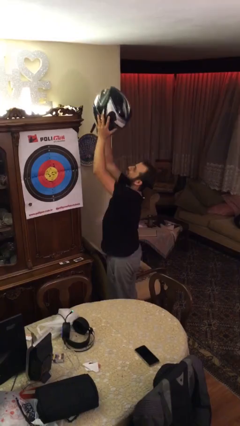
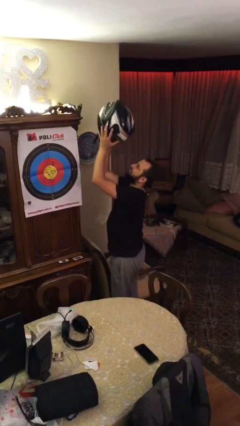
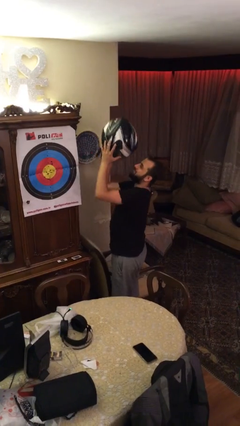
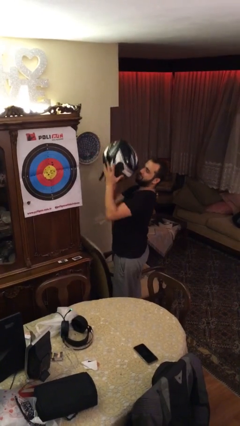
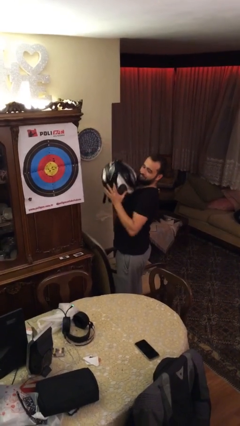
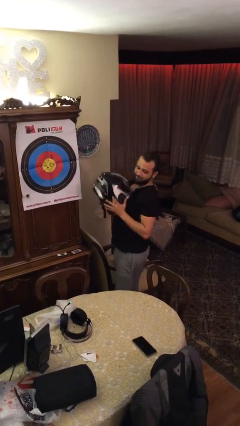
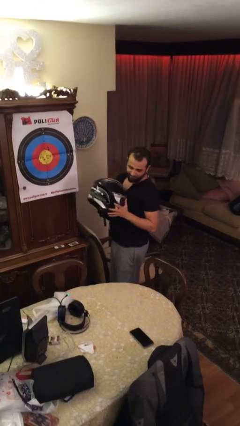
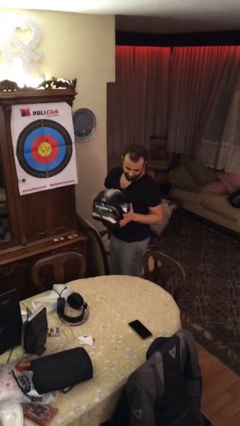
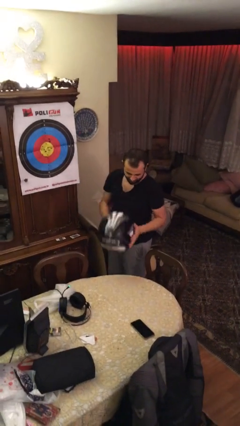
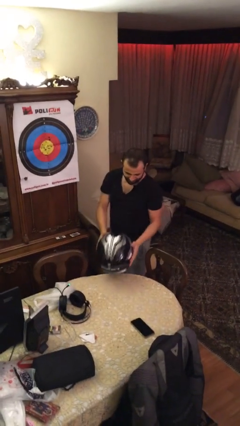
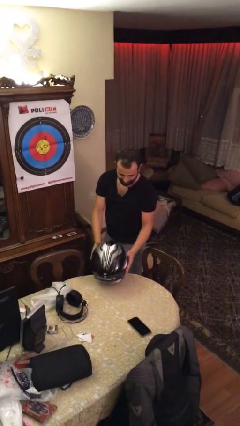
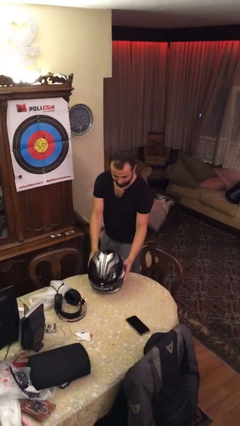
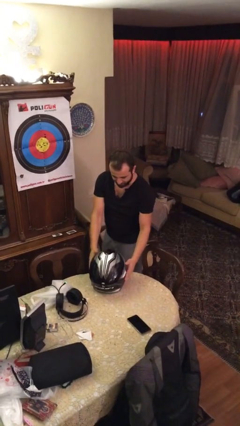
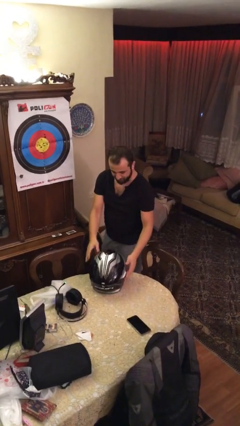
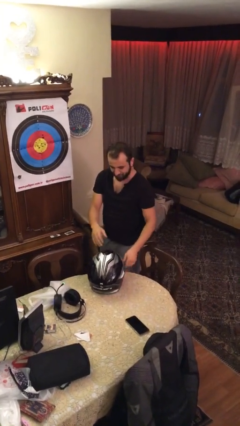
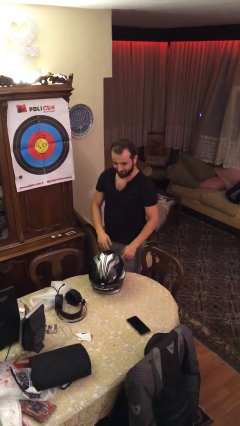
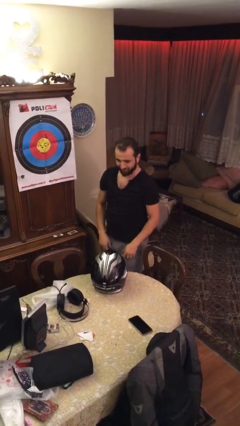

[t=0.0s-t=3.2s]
person puts down object on table

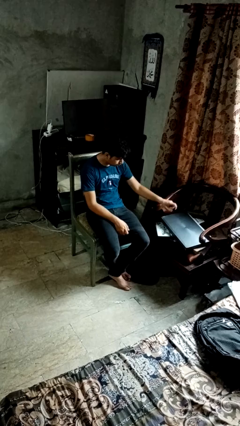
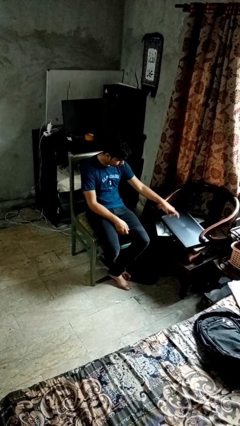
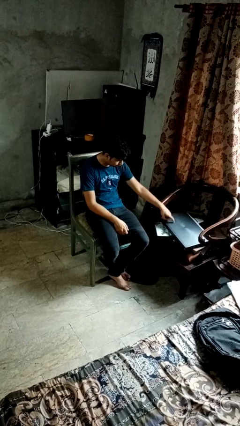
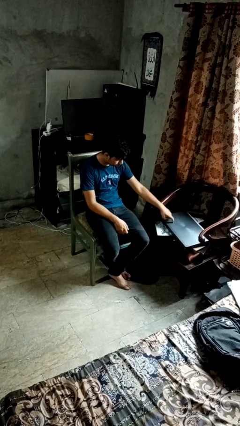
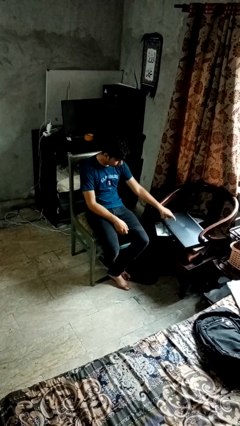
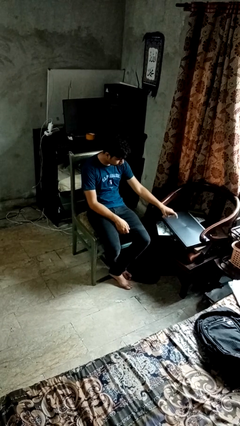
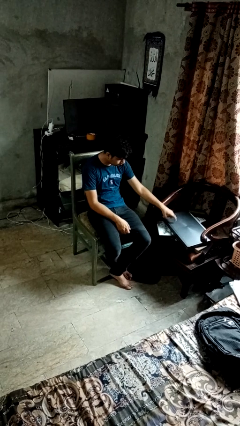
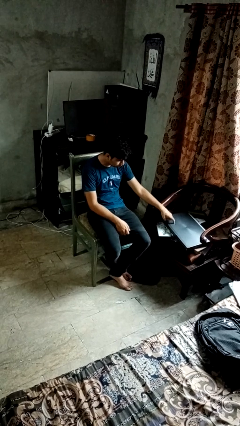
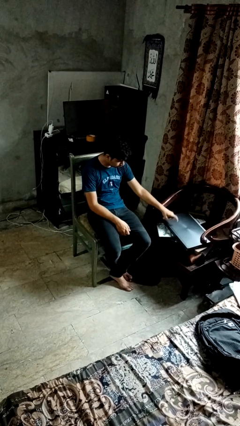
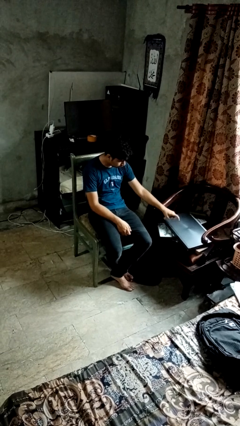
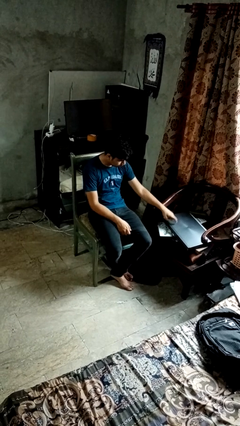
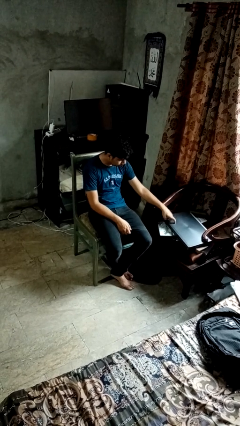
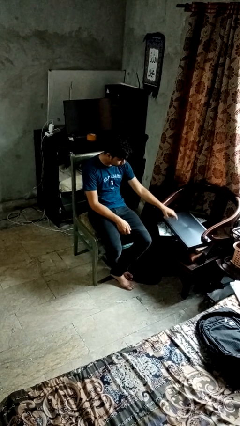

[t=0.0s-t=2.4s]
person taps object with finger

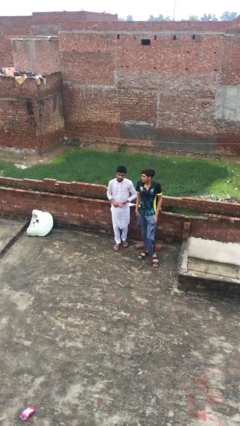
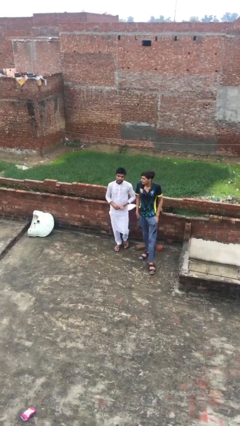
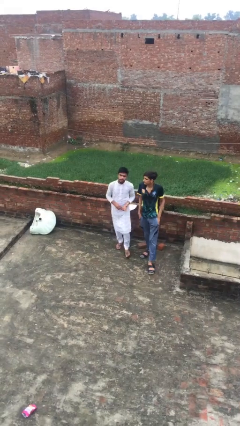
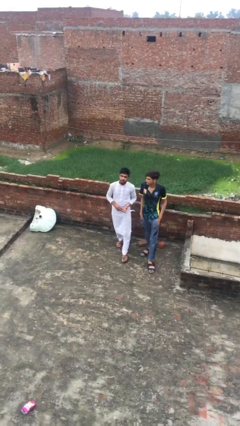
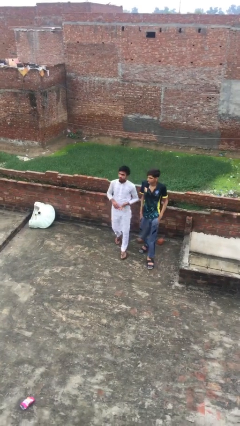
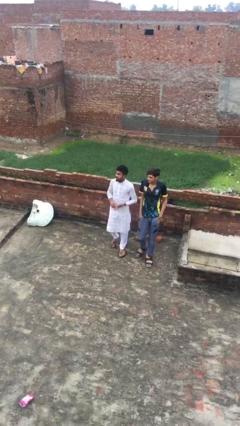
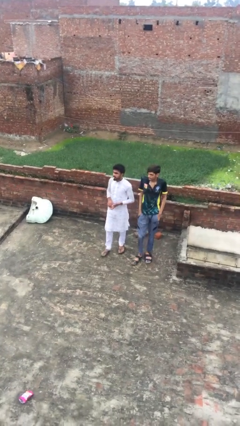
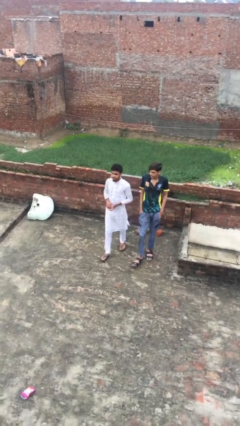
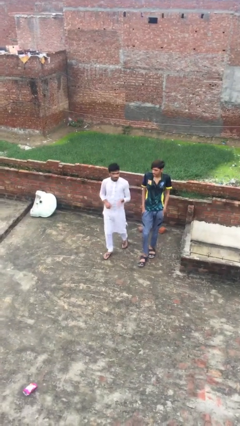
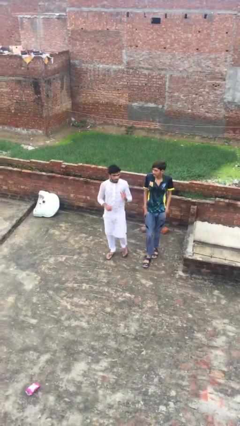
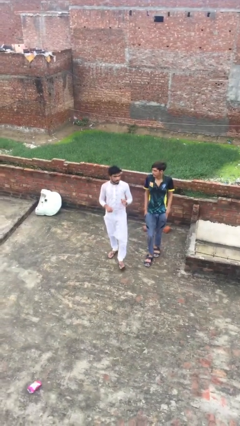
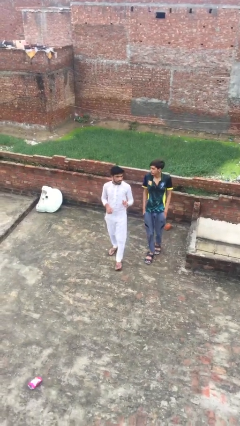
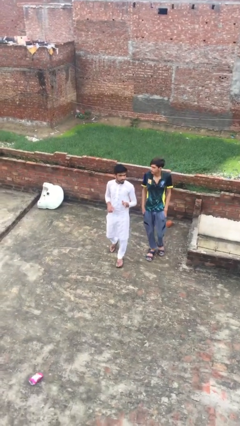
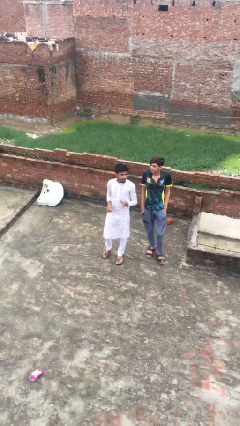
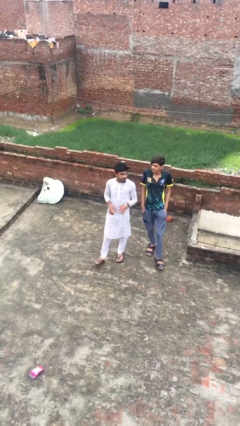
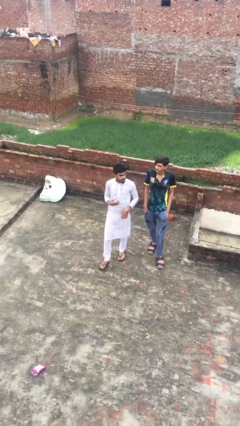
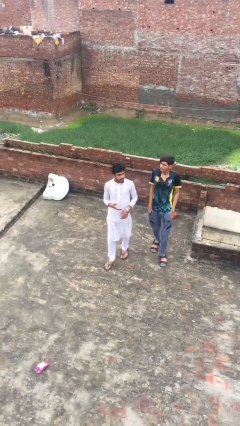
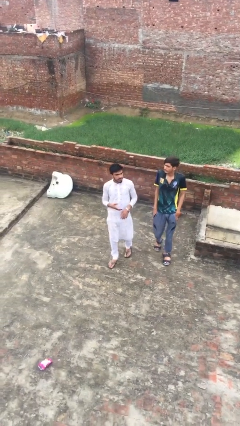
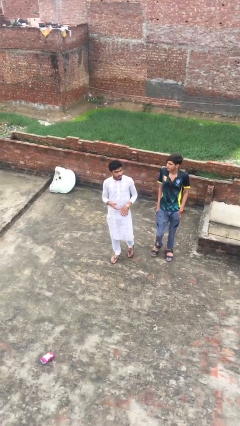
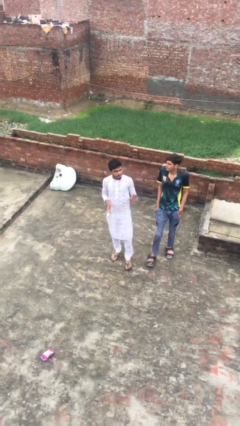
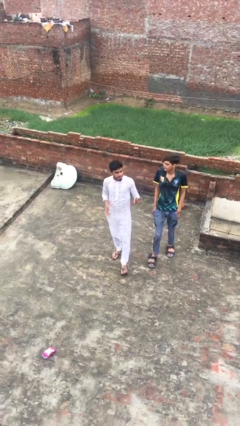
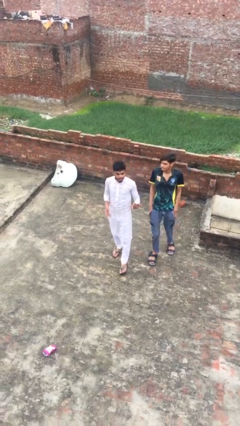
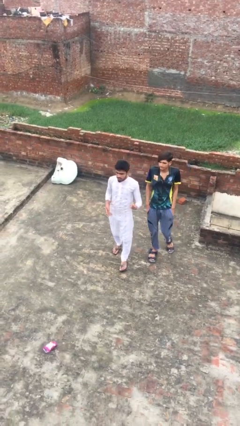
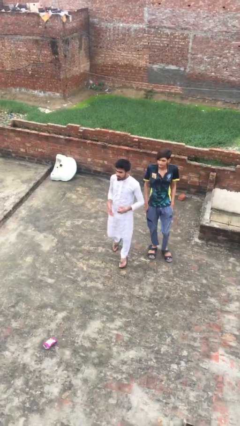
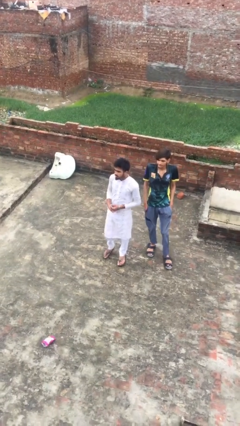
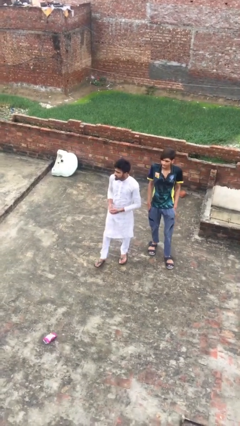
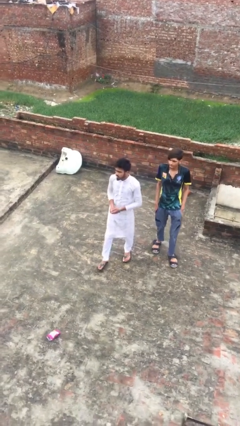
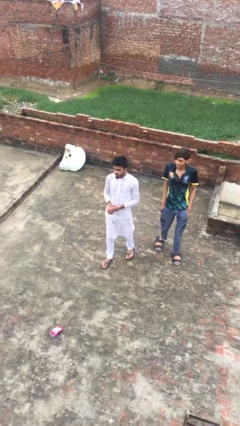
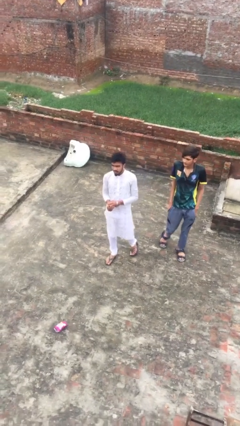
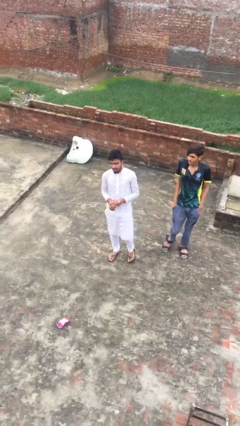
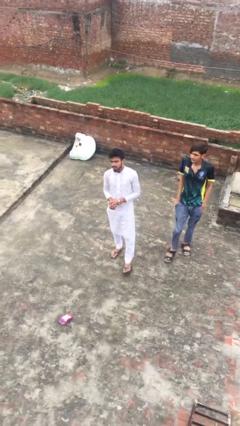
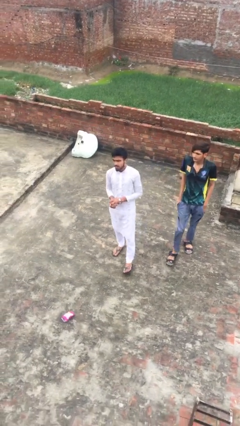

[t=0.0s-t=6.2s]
person talks to person

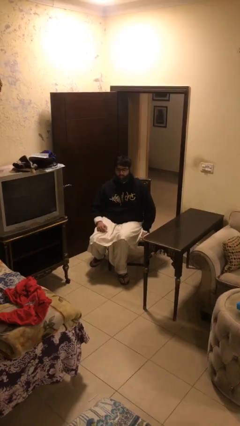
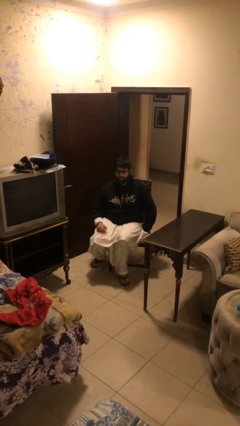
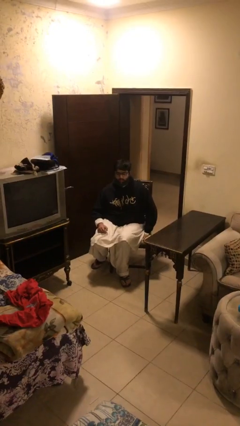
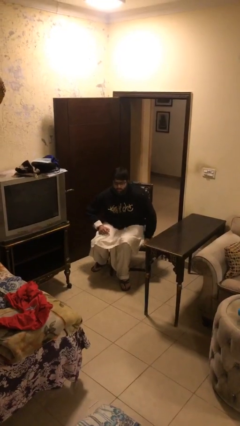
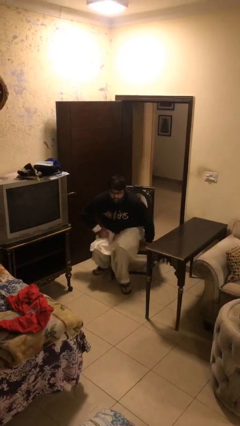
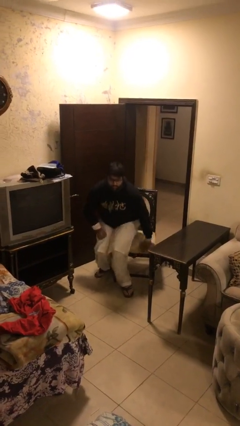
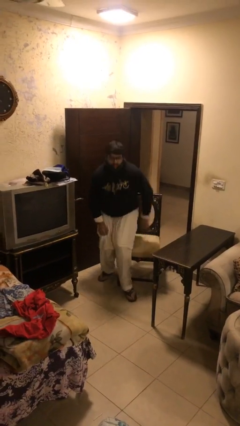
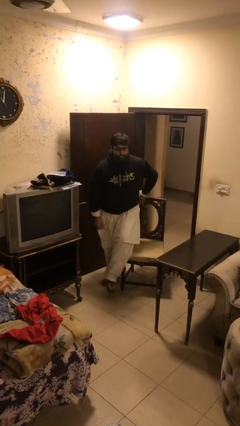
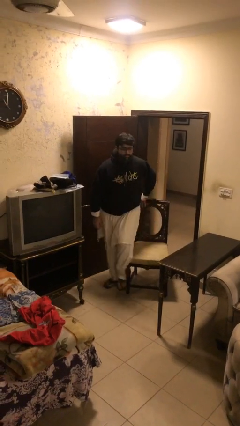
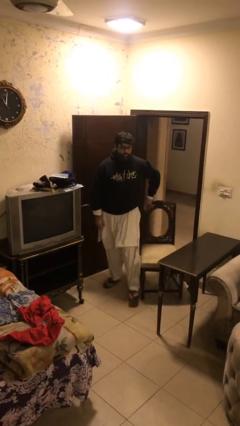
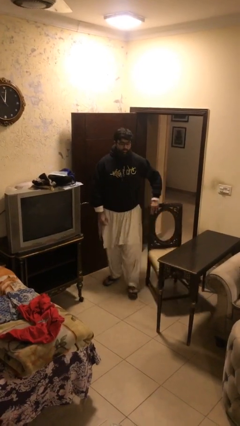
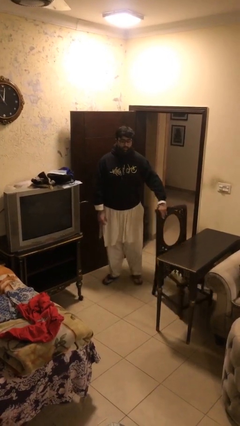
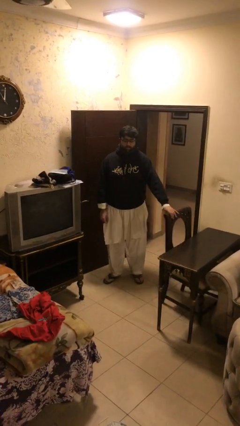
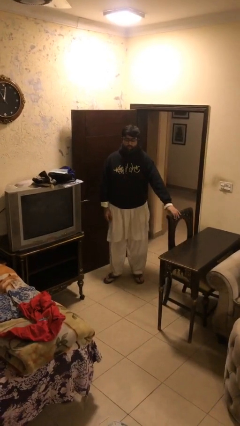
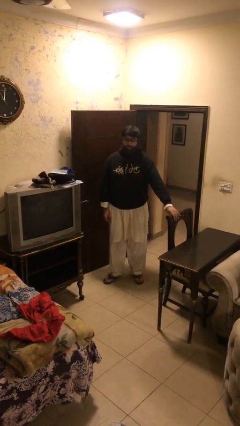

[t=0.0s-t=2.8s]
person stands up

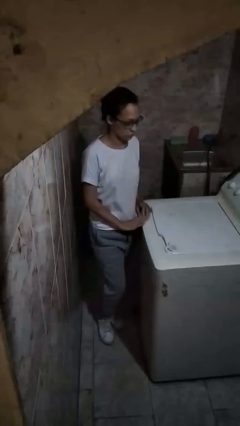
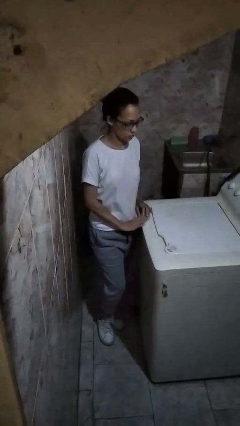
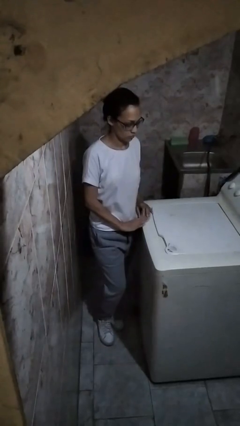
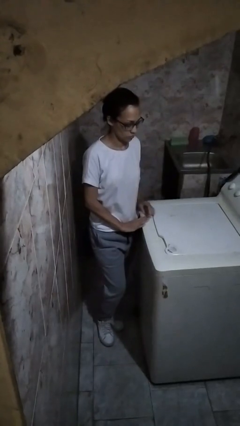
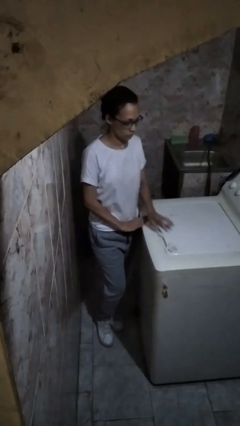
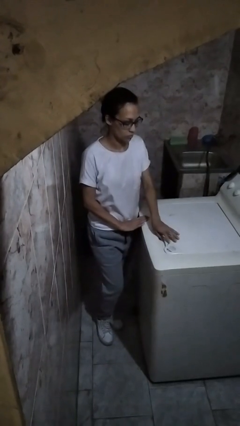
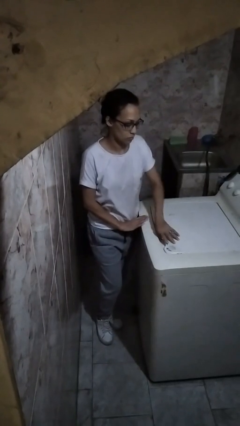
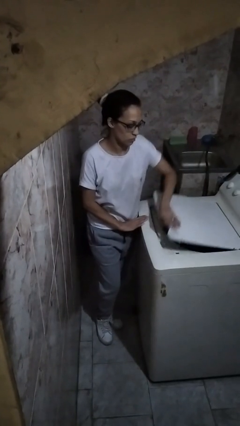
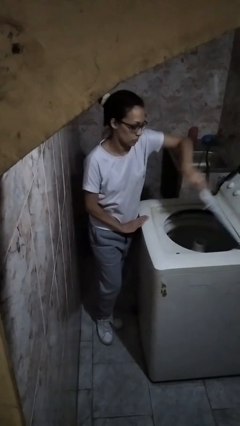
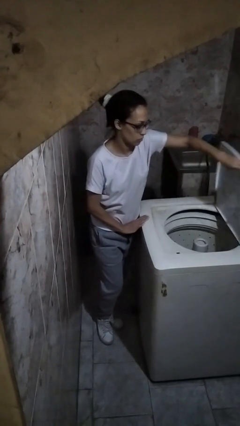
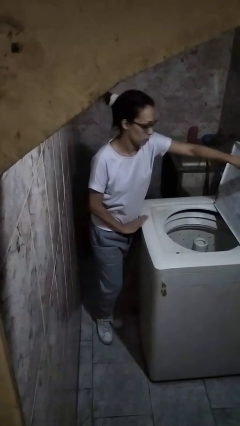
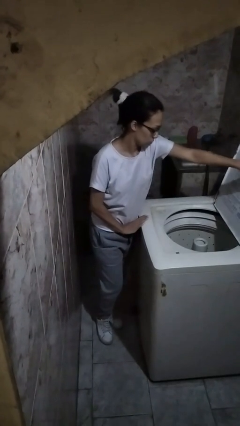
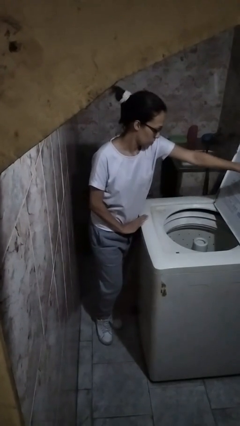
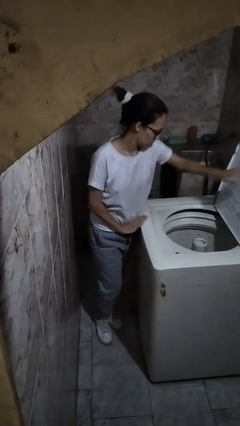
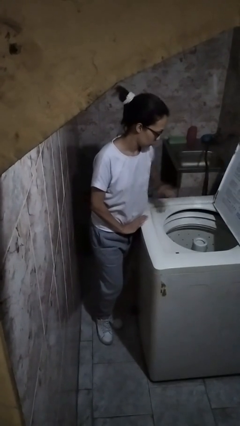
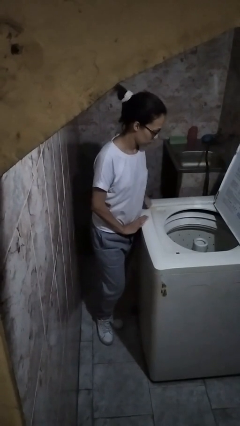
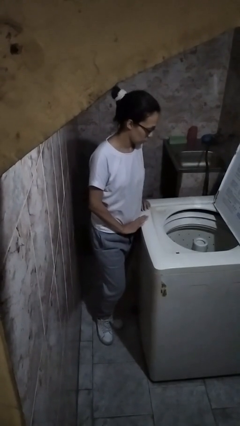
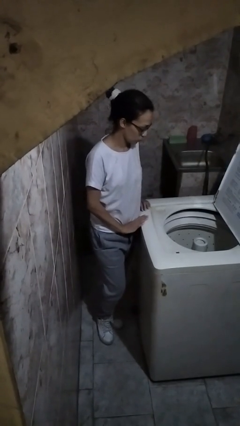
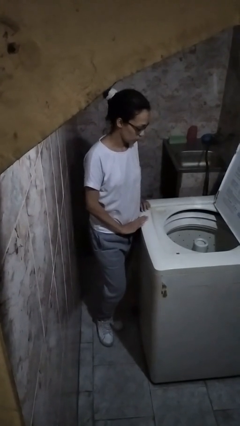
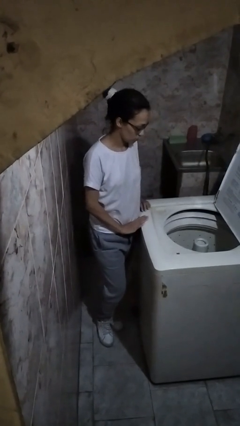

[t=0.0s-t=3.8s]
person opens clothes washer
